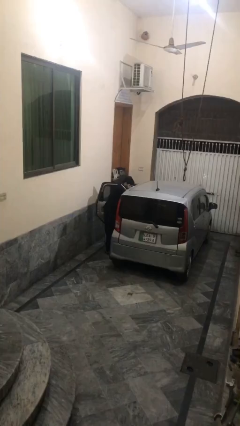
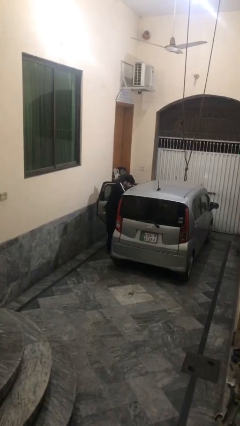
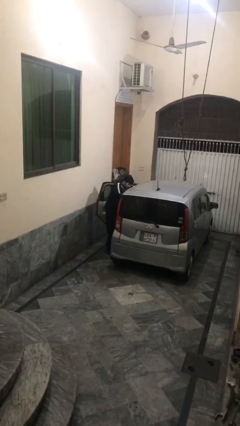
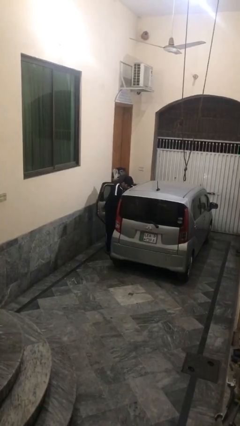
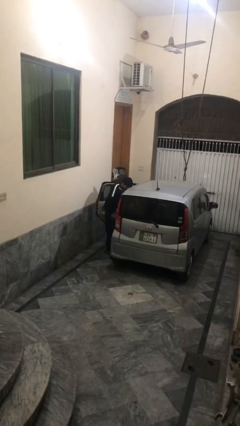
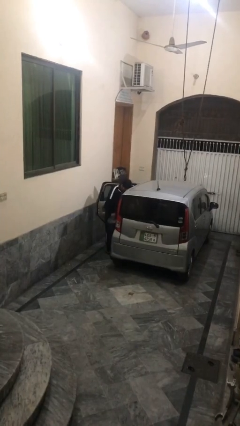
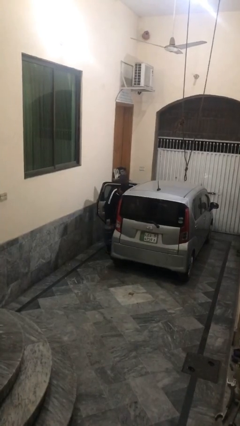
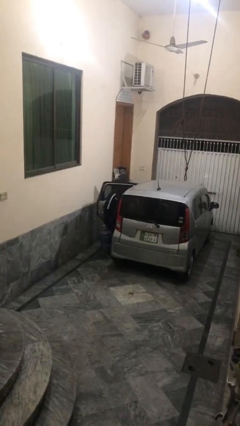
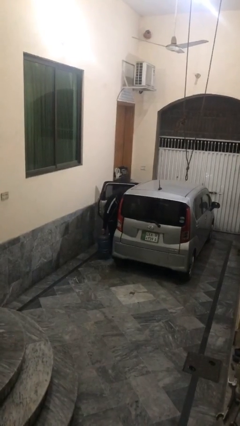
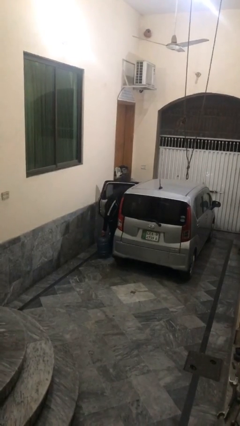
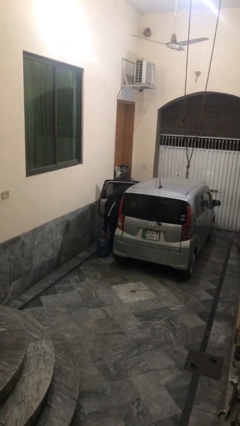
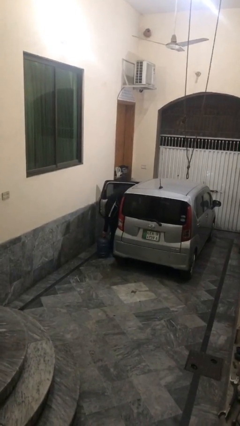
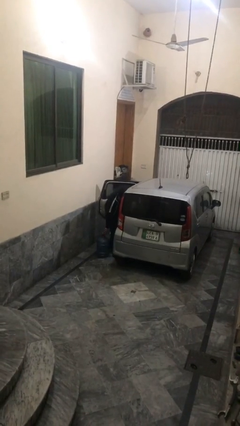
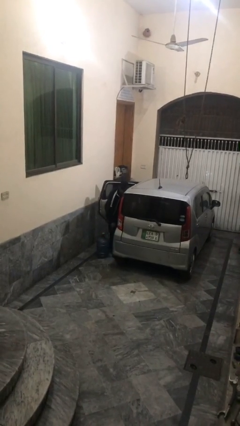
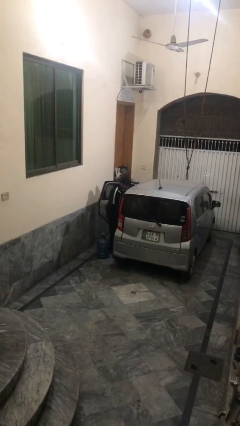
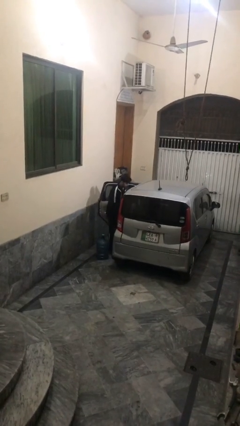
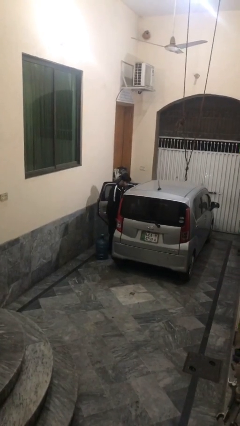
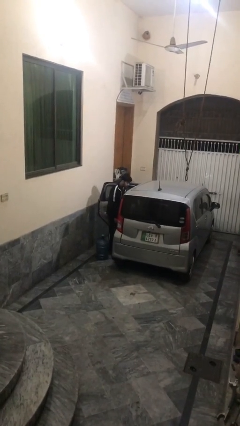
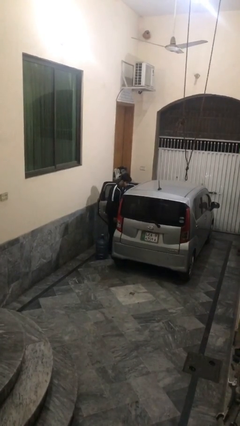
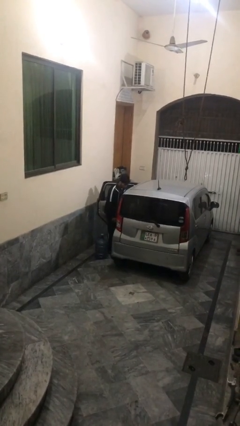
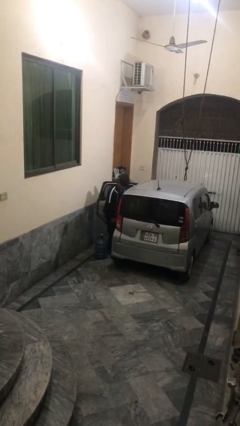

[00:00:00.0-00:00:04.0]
person unloads car

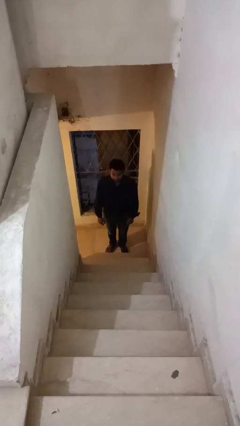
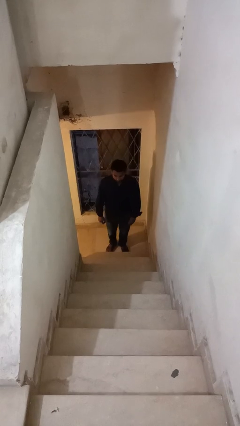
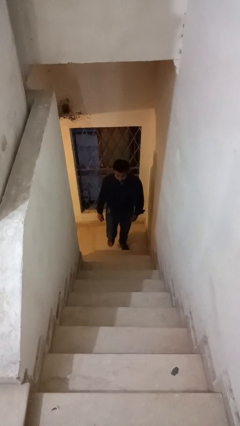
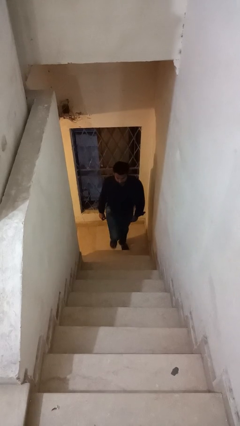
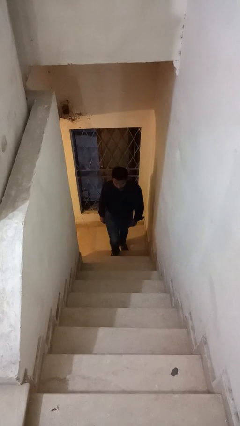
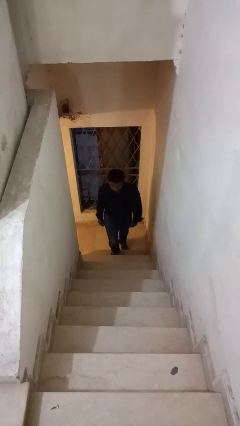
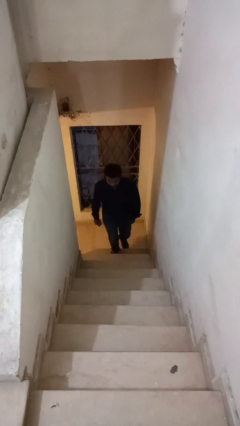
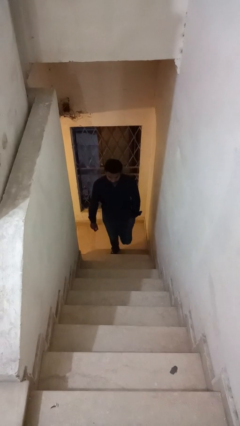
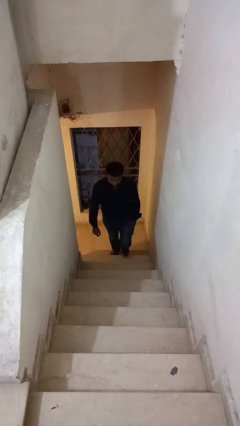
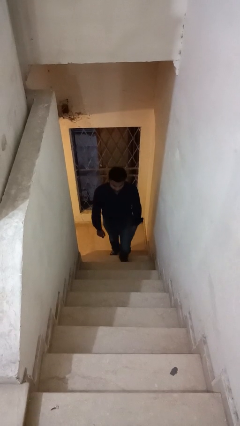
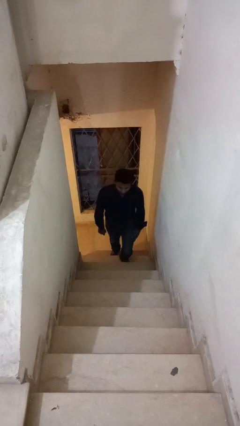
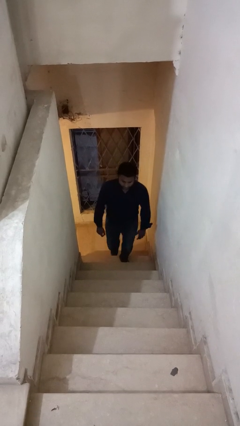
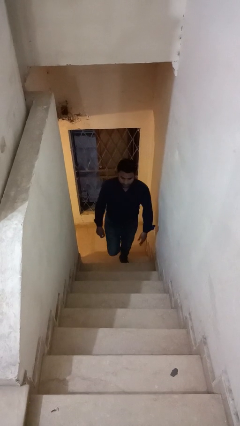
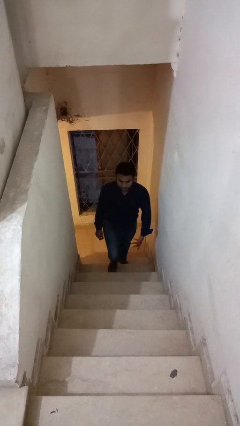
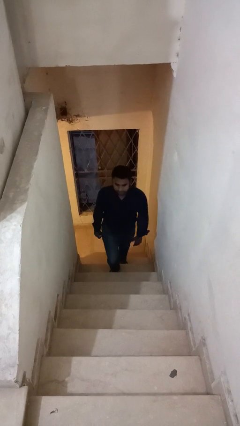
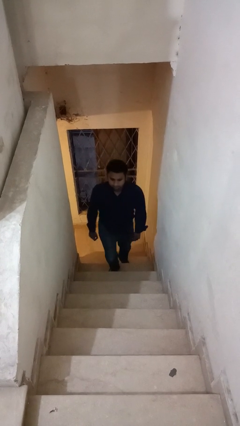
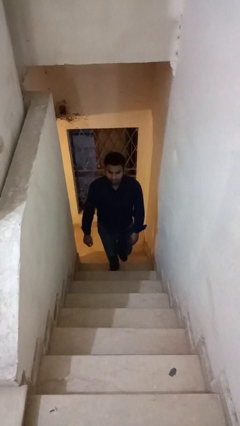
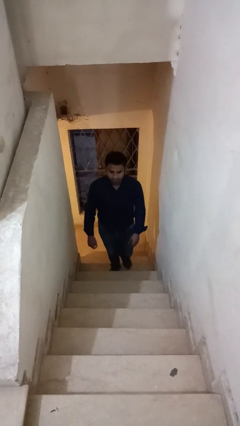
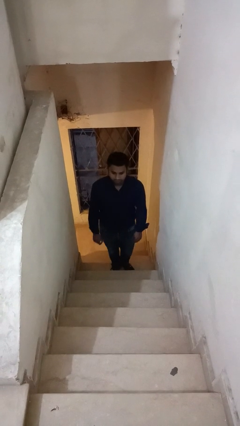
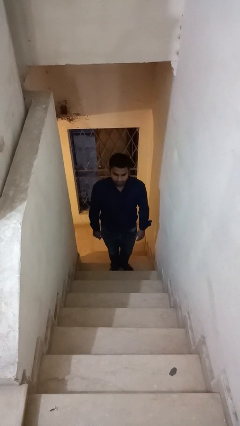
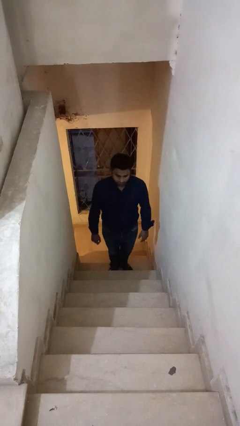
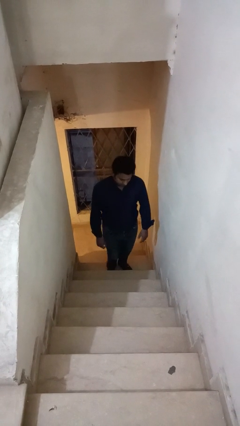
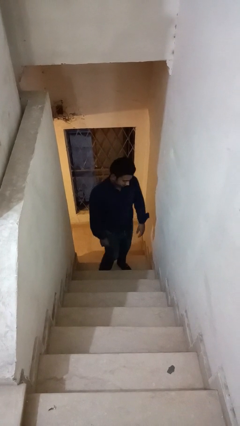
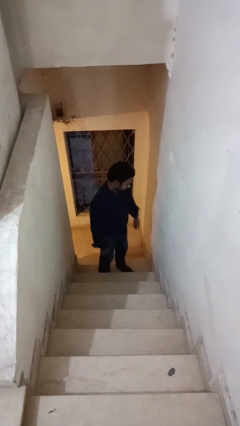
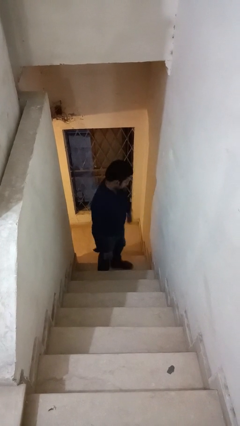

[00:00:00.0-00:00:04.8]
person climbs up stairs

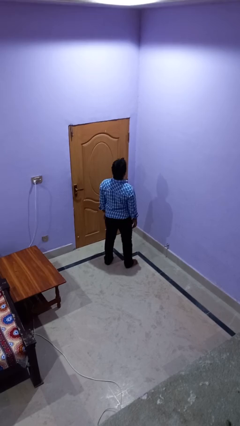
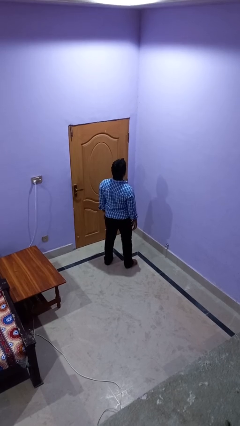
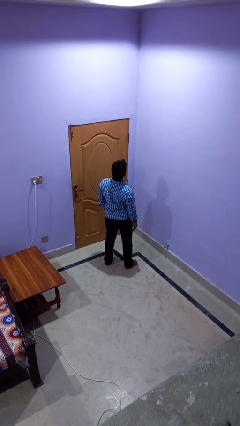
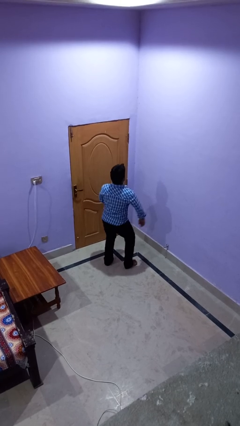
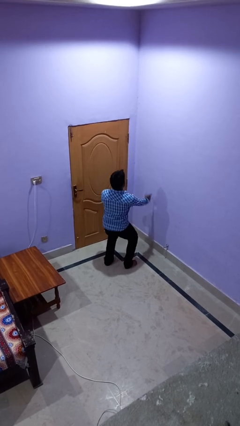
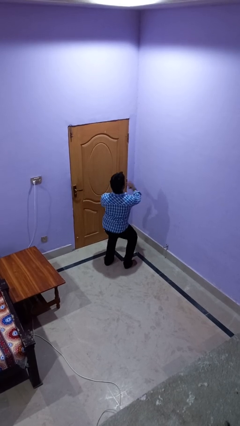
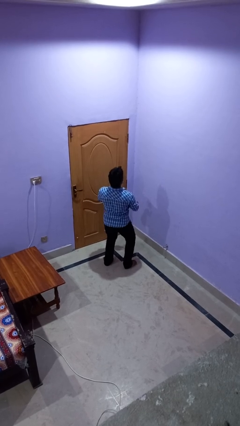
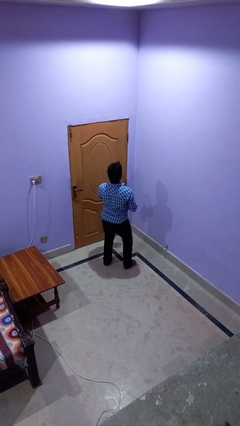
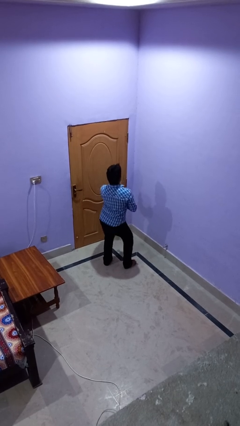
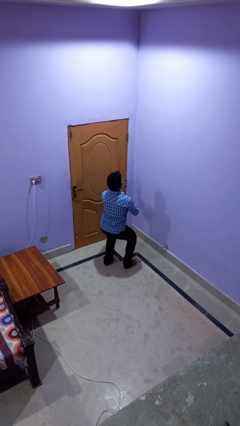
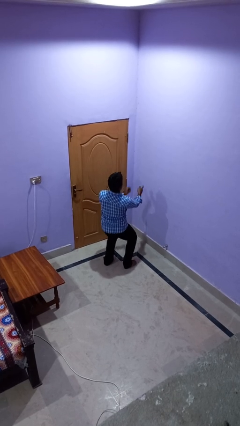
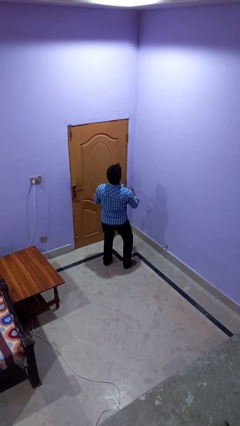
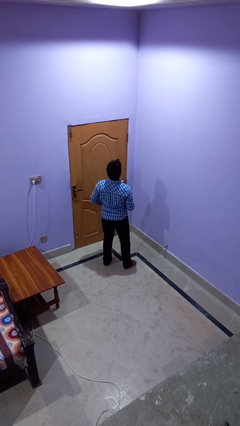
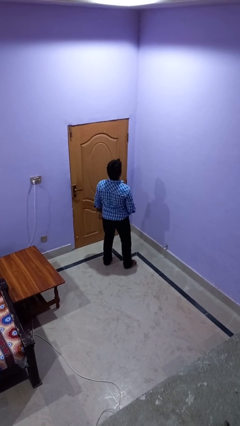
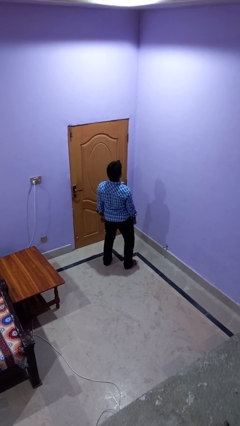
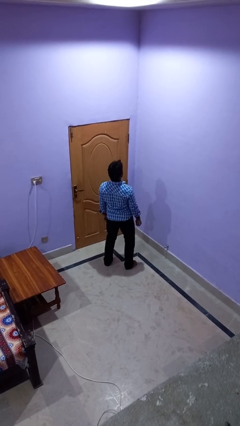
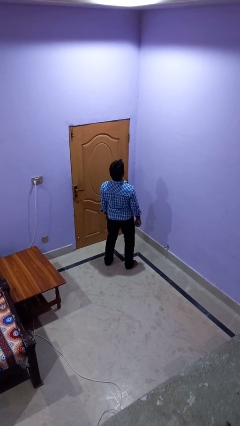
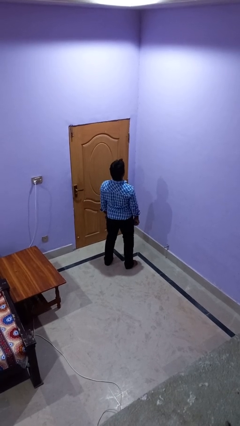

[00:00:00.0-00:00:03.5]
person dances in place

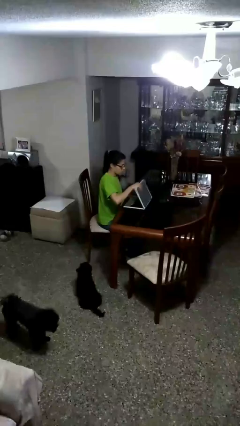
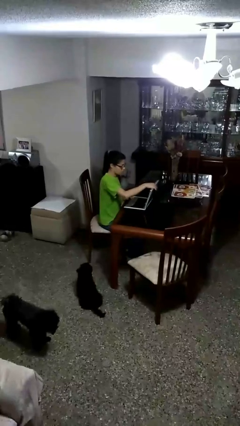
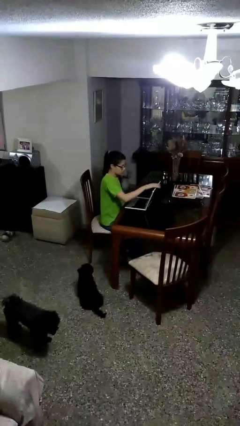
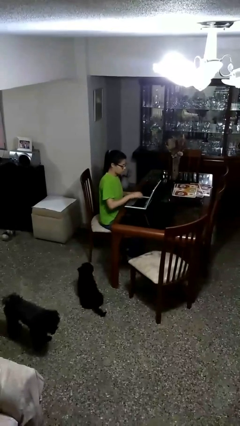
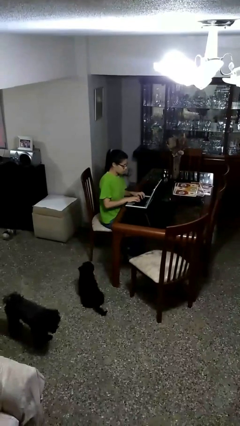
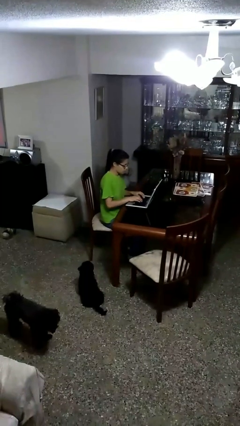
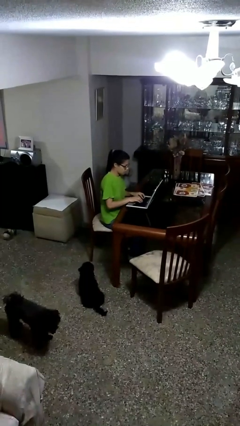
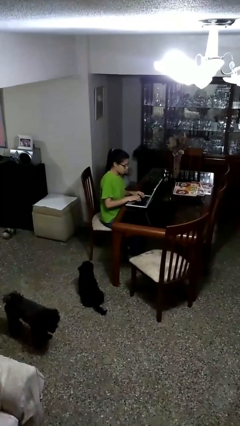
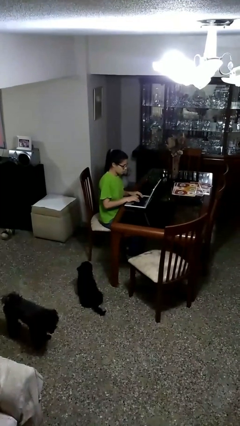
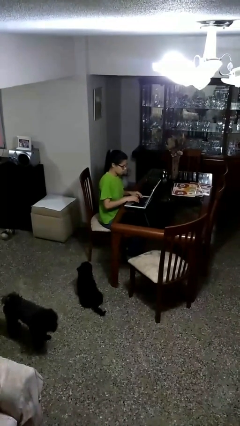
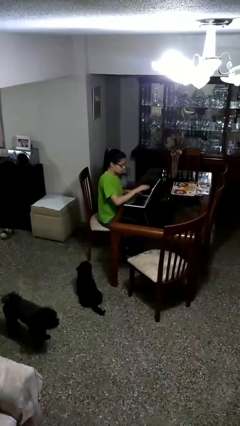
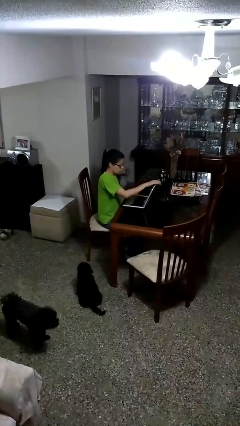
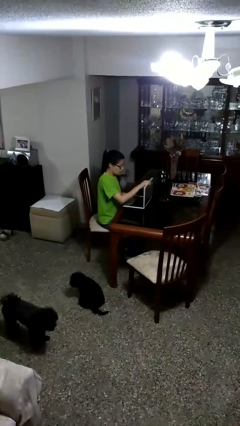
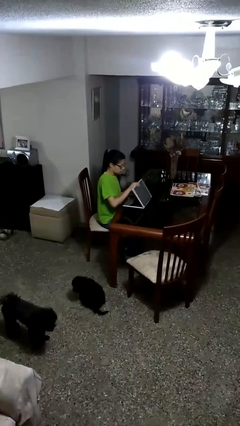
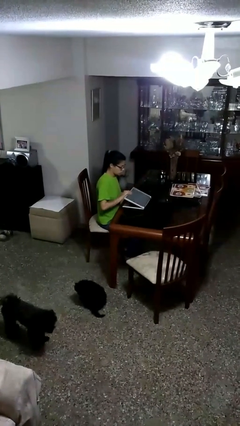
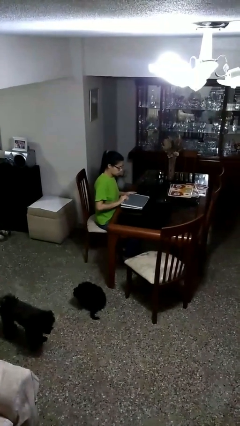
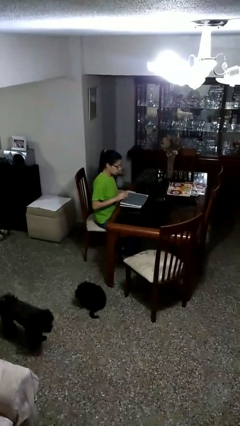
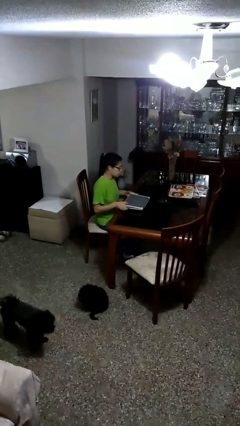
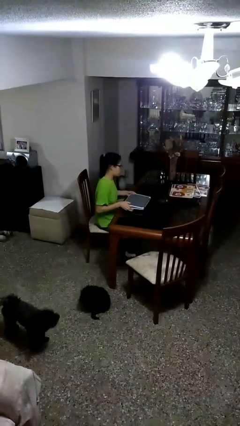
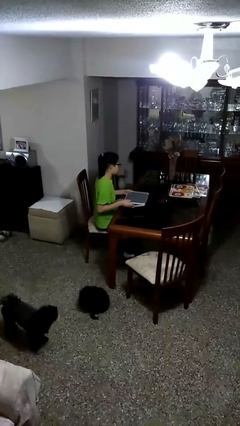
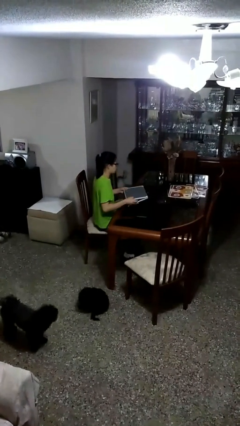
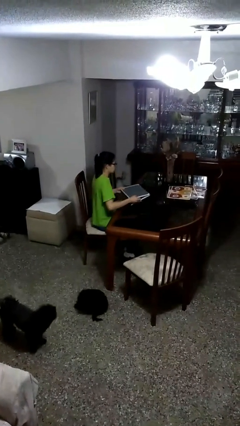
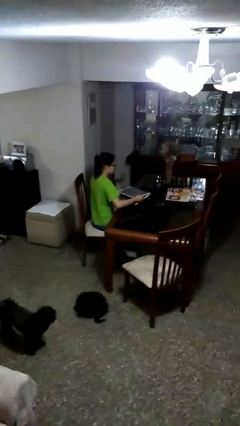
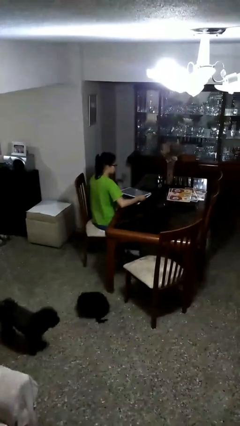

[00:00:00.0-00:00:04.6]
person interacts with laptop

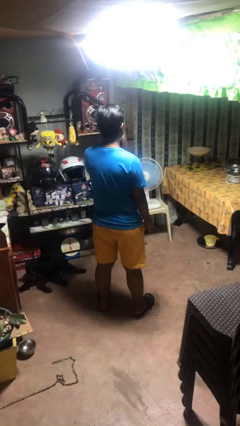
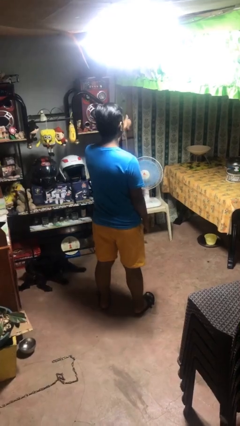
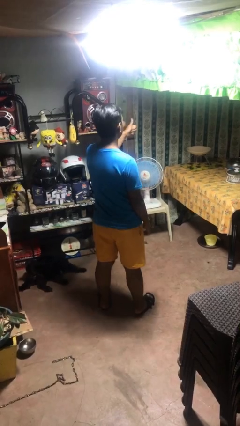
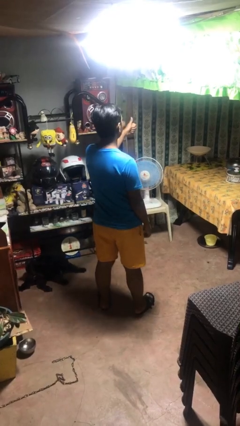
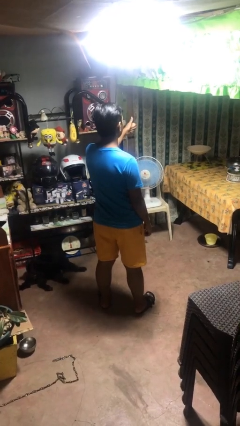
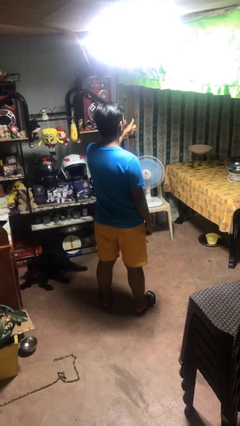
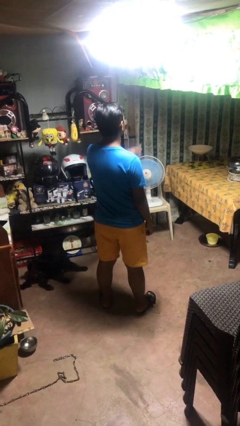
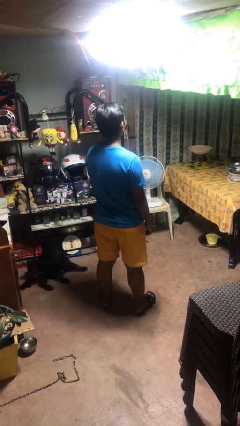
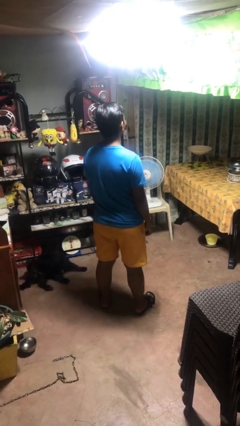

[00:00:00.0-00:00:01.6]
person gestures thumbs up
